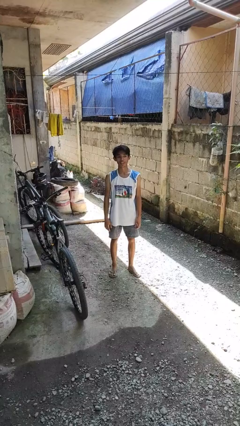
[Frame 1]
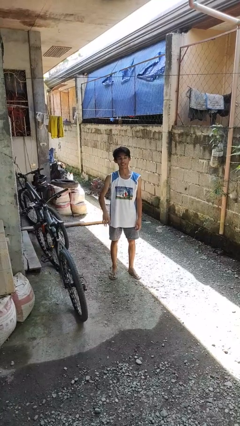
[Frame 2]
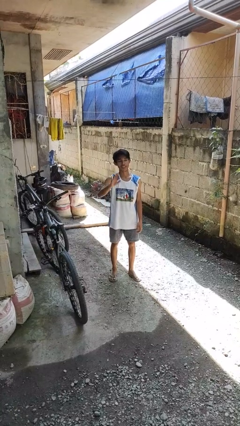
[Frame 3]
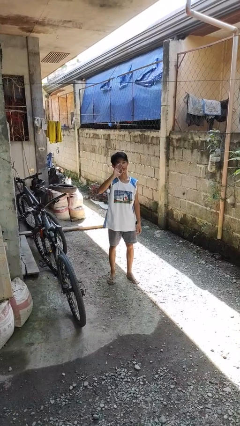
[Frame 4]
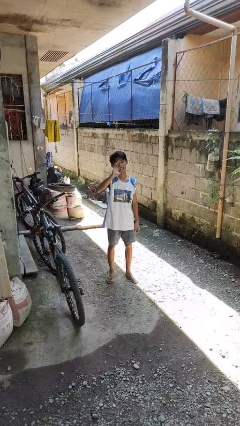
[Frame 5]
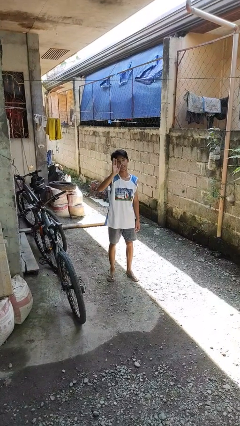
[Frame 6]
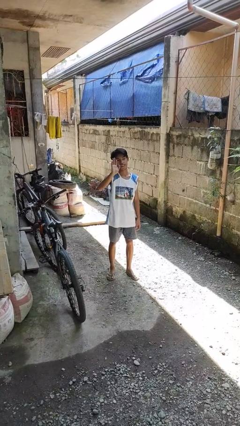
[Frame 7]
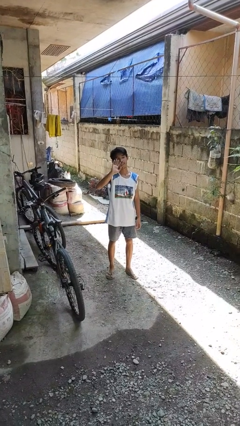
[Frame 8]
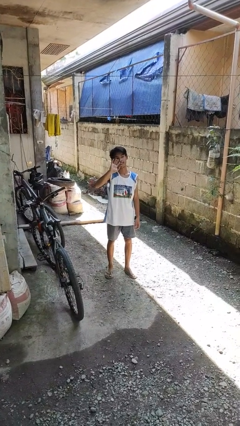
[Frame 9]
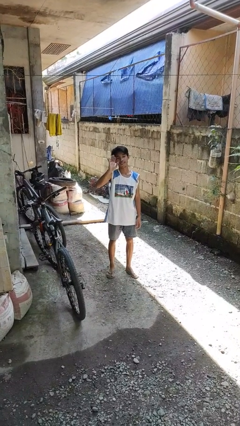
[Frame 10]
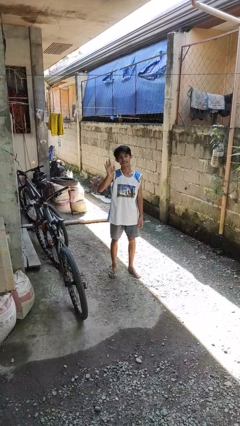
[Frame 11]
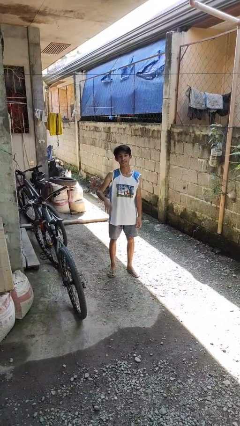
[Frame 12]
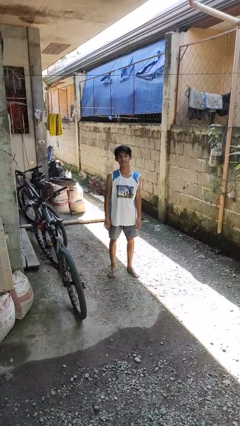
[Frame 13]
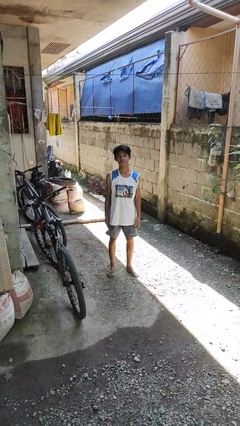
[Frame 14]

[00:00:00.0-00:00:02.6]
person waves at person

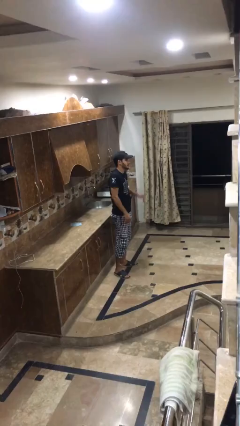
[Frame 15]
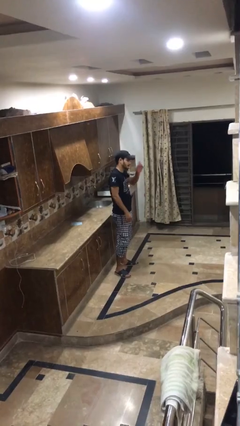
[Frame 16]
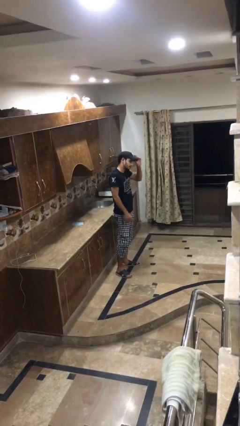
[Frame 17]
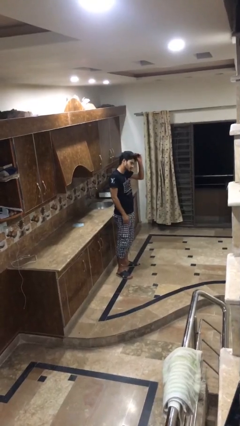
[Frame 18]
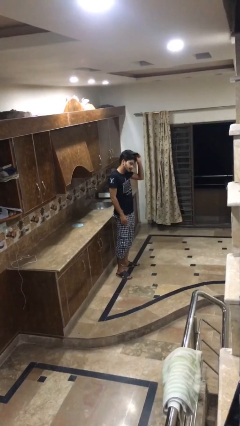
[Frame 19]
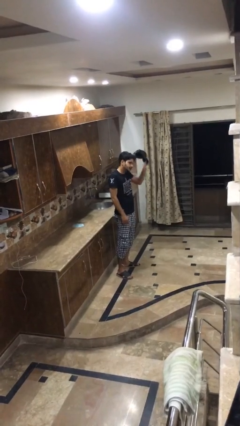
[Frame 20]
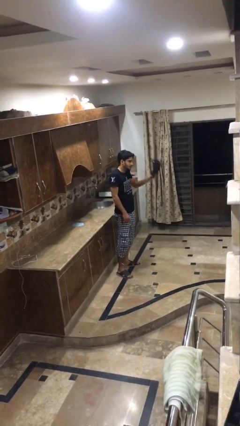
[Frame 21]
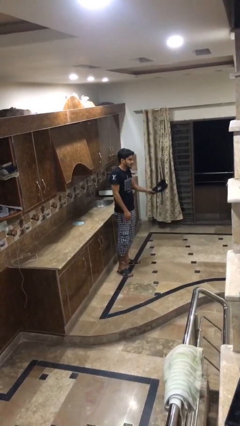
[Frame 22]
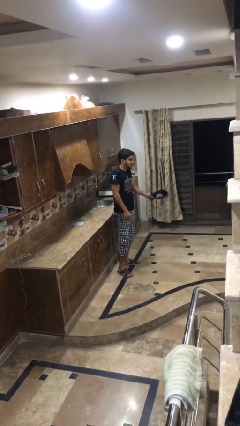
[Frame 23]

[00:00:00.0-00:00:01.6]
person takes off hat

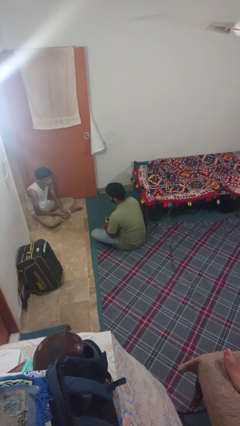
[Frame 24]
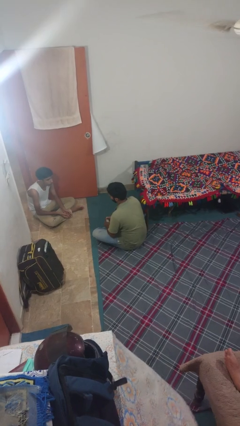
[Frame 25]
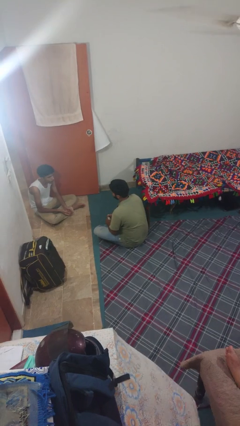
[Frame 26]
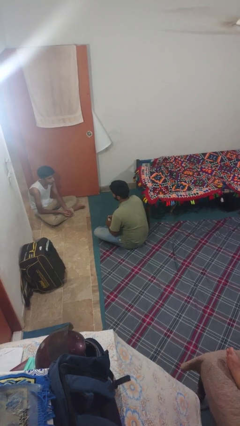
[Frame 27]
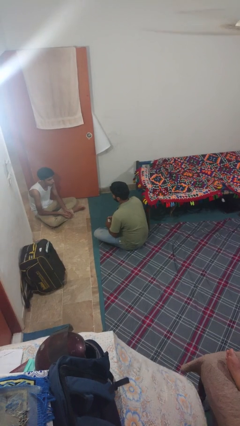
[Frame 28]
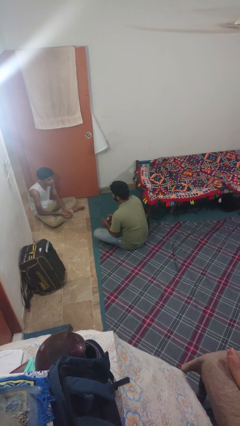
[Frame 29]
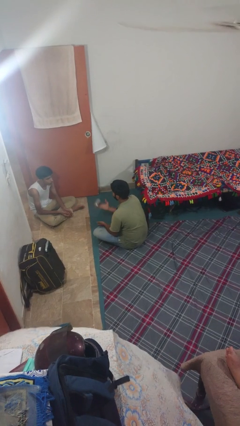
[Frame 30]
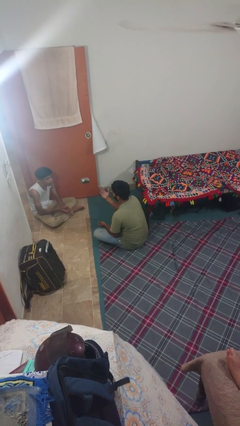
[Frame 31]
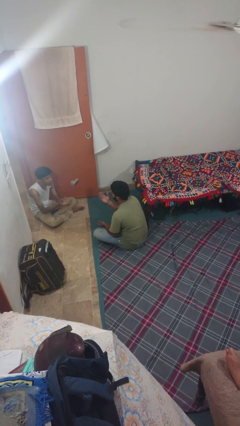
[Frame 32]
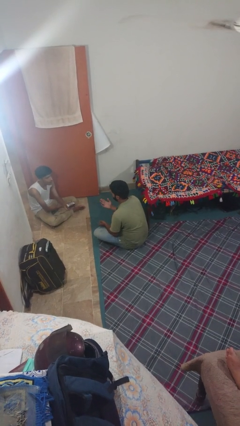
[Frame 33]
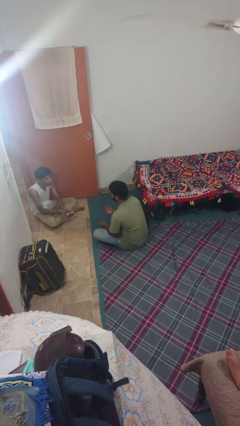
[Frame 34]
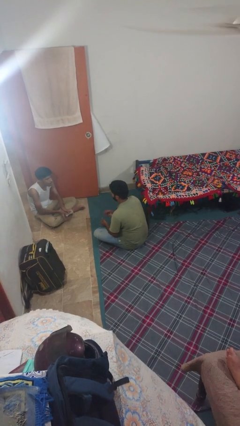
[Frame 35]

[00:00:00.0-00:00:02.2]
person throws object to person

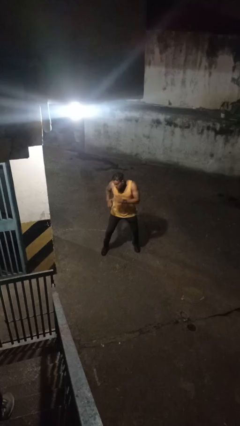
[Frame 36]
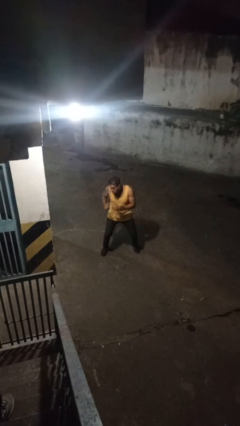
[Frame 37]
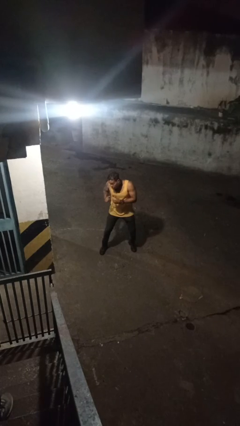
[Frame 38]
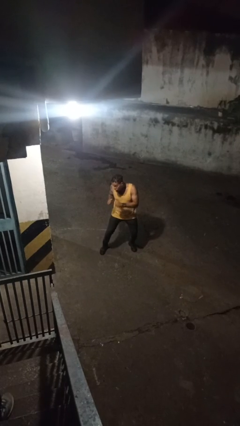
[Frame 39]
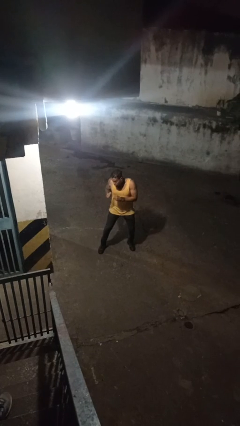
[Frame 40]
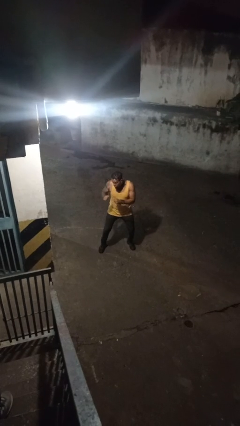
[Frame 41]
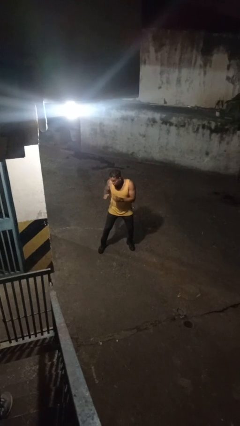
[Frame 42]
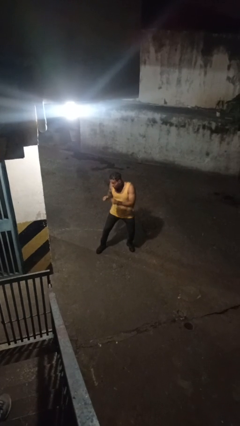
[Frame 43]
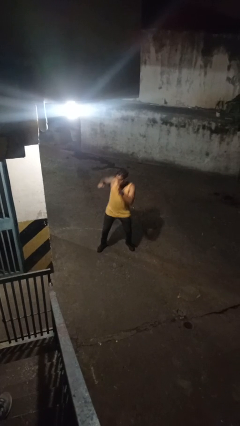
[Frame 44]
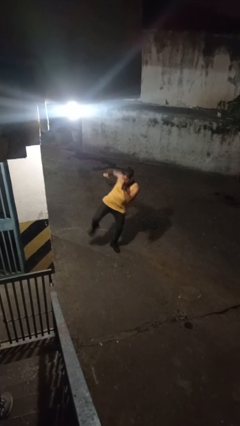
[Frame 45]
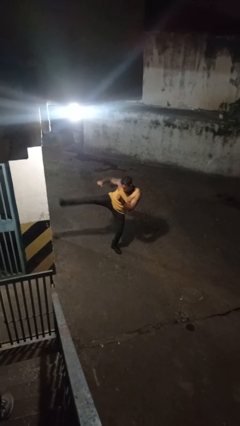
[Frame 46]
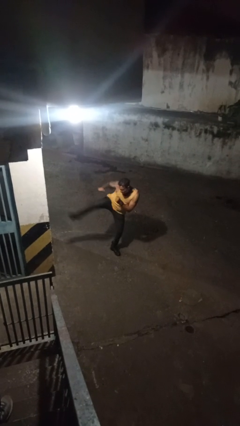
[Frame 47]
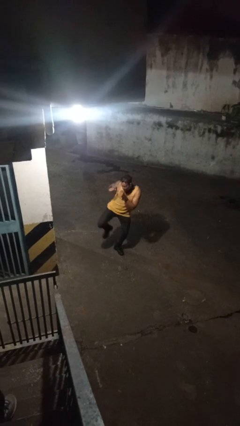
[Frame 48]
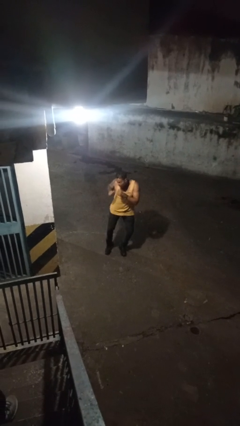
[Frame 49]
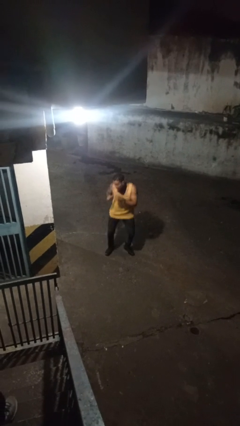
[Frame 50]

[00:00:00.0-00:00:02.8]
person karate kicks

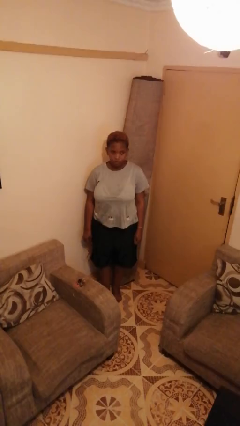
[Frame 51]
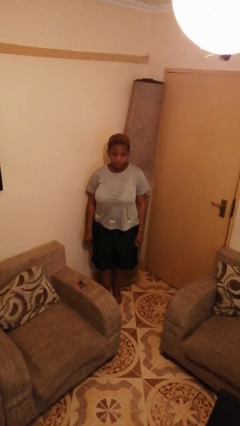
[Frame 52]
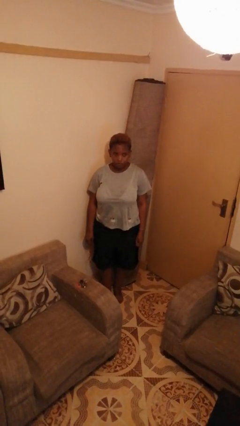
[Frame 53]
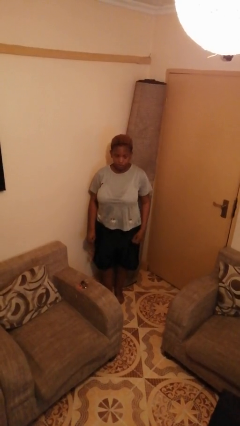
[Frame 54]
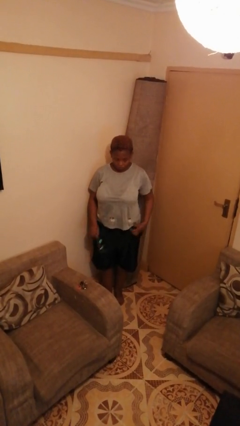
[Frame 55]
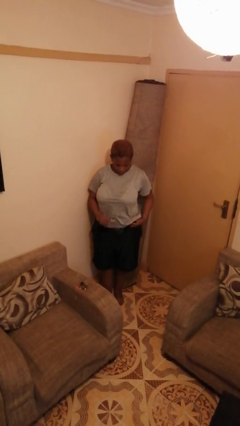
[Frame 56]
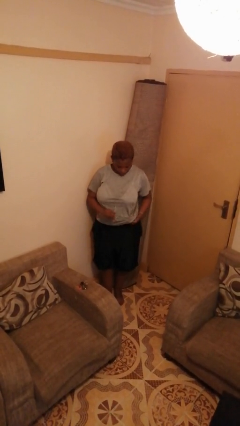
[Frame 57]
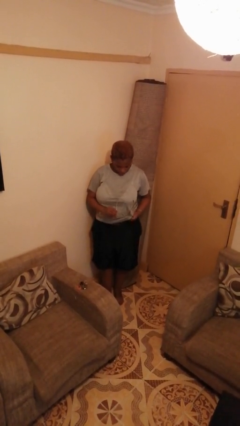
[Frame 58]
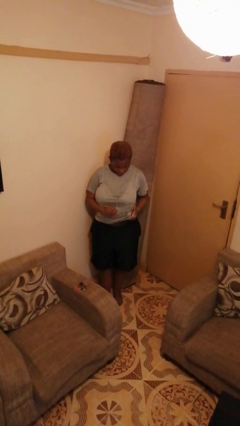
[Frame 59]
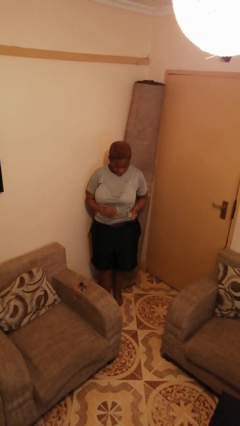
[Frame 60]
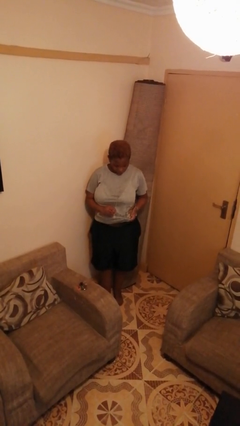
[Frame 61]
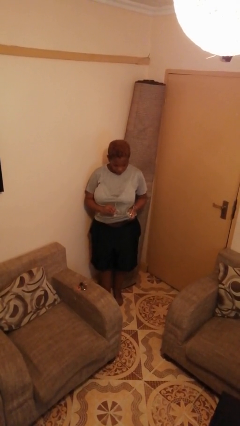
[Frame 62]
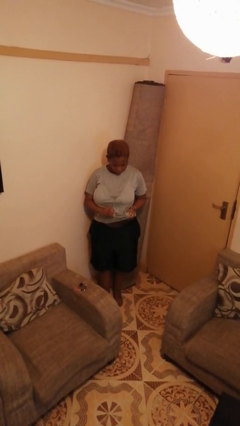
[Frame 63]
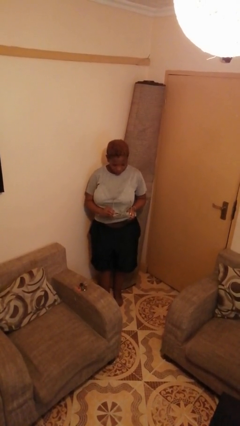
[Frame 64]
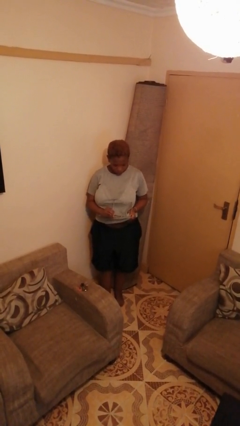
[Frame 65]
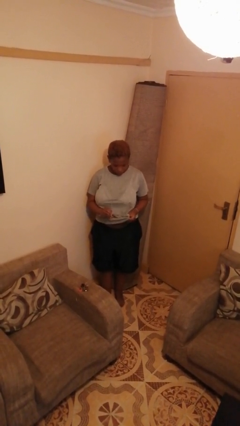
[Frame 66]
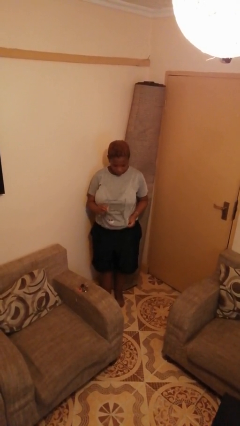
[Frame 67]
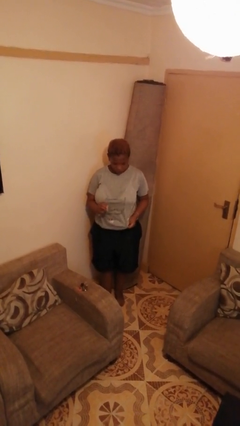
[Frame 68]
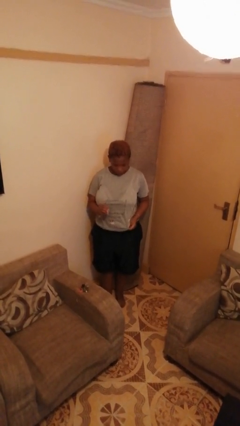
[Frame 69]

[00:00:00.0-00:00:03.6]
person cleans eyeglasses

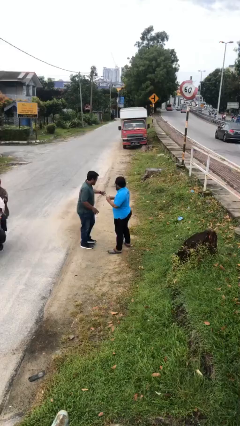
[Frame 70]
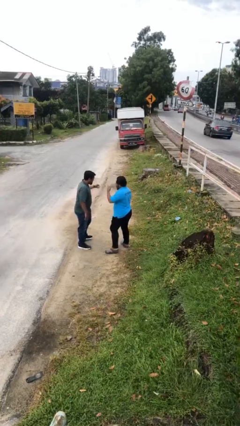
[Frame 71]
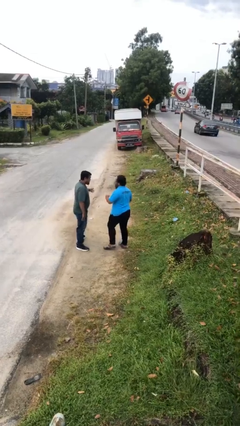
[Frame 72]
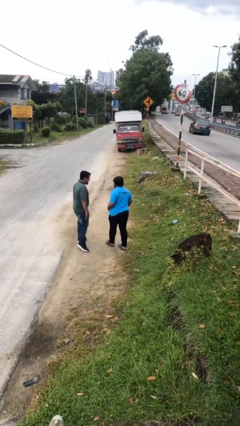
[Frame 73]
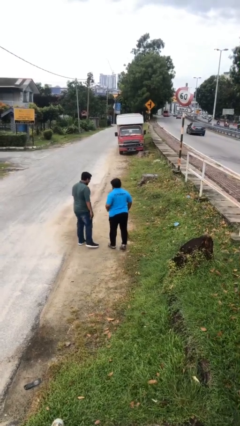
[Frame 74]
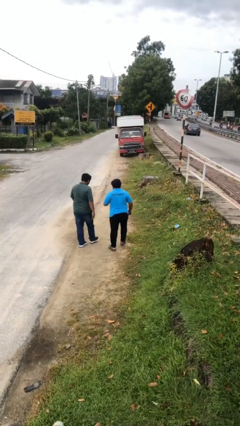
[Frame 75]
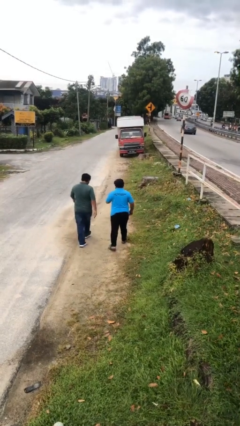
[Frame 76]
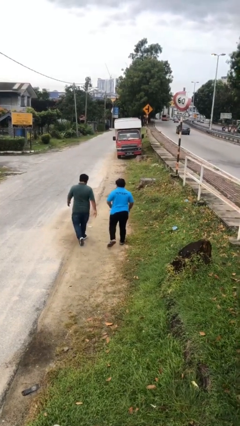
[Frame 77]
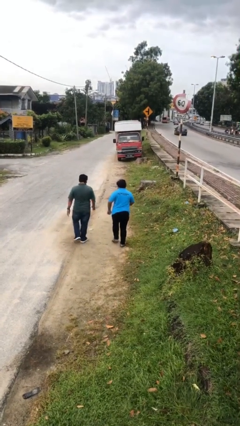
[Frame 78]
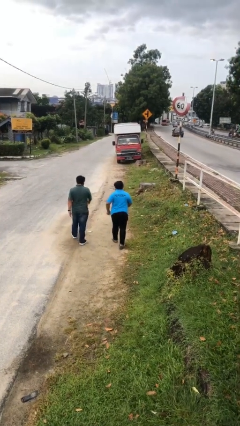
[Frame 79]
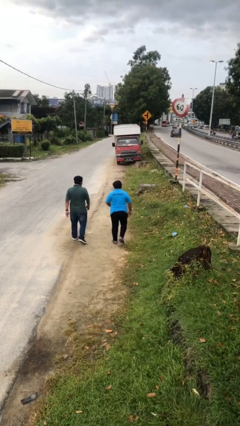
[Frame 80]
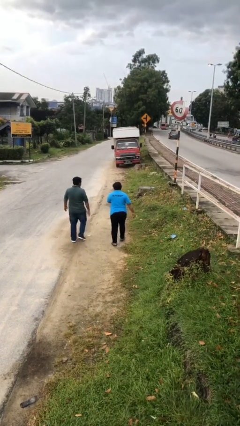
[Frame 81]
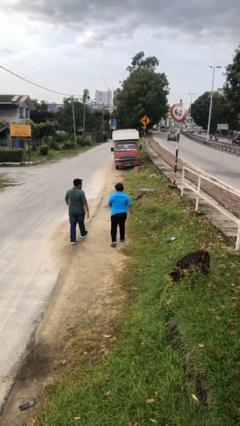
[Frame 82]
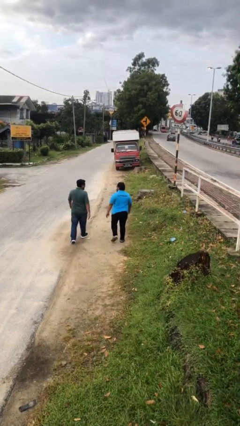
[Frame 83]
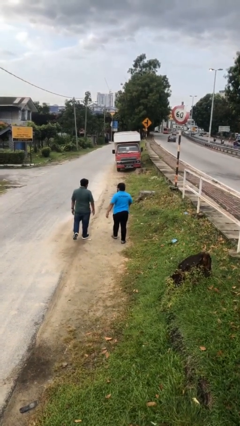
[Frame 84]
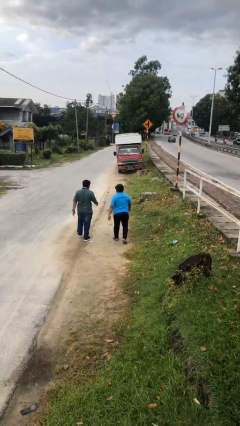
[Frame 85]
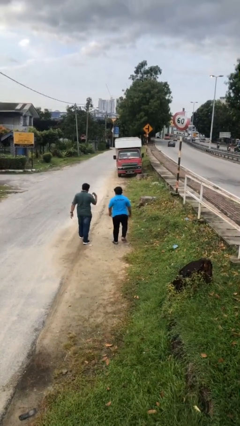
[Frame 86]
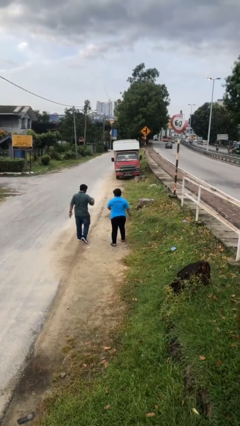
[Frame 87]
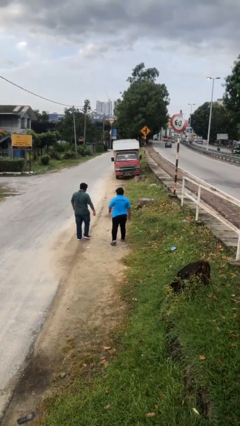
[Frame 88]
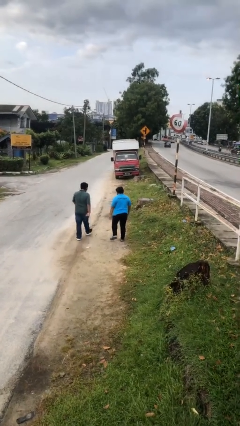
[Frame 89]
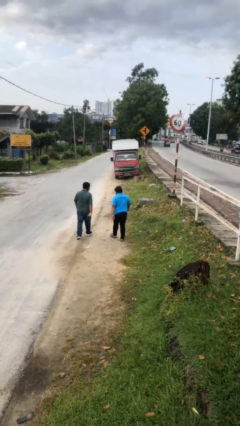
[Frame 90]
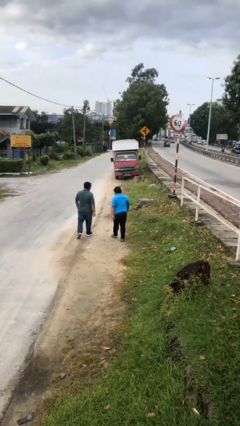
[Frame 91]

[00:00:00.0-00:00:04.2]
person talks to person
